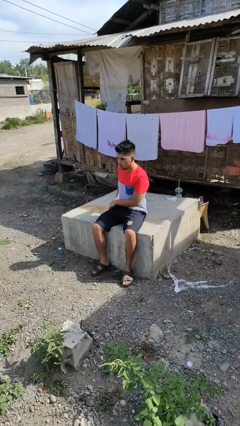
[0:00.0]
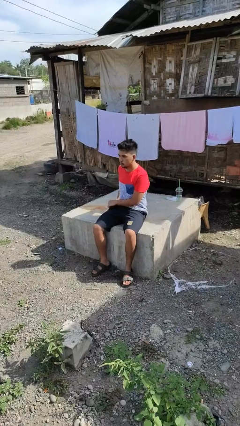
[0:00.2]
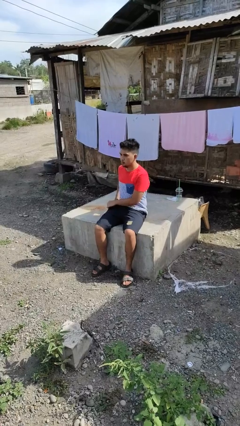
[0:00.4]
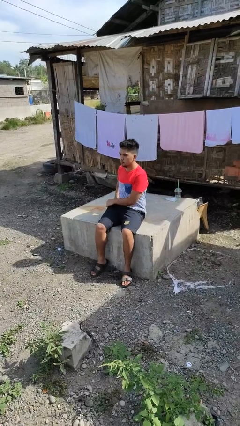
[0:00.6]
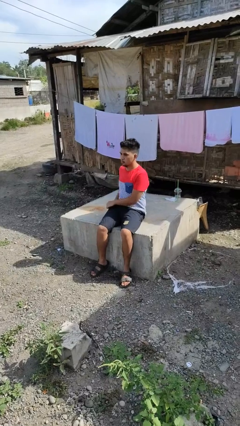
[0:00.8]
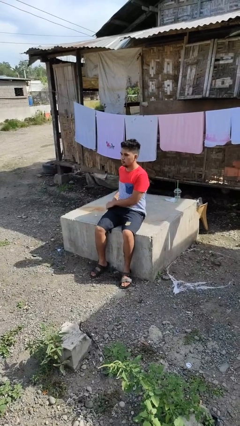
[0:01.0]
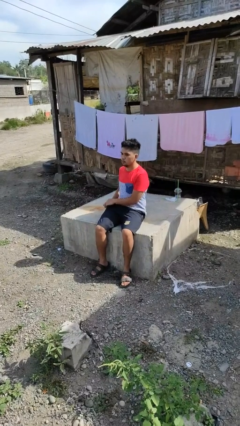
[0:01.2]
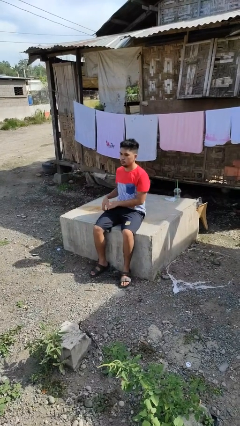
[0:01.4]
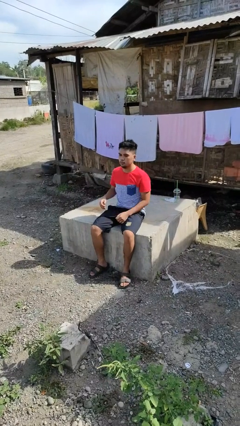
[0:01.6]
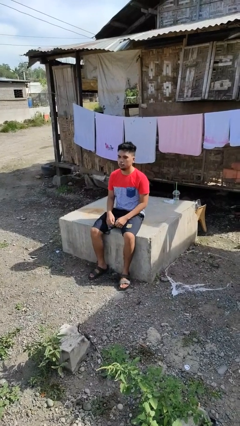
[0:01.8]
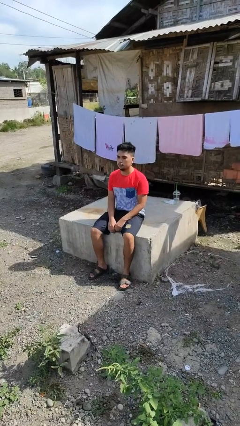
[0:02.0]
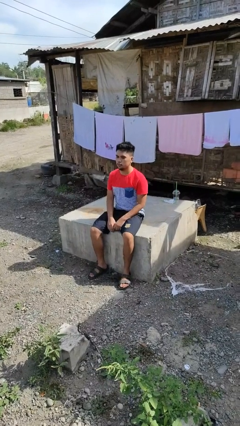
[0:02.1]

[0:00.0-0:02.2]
person puts phone into pocket

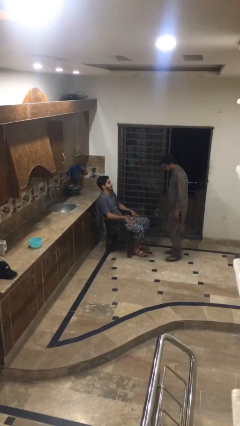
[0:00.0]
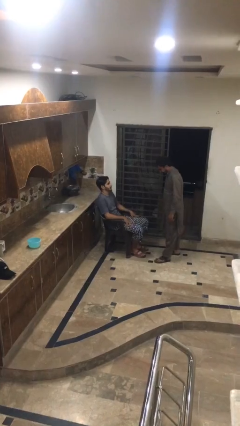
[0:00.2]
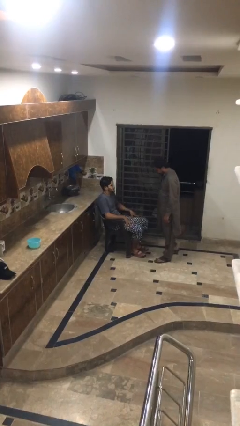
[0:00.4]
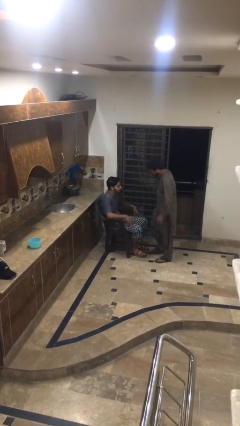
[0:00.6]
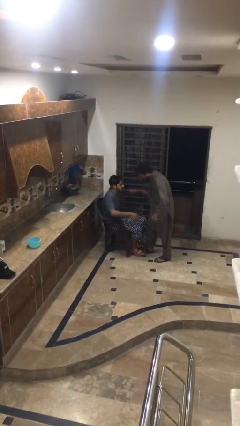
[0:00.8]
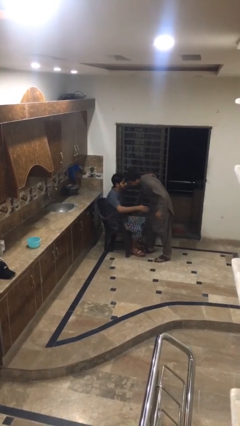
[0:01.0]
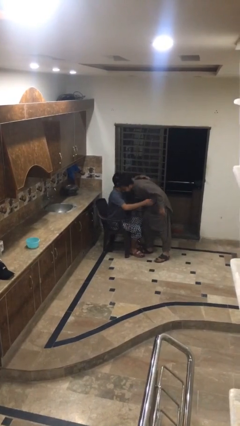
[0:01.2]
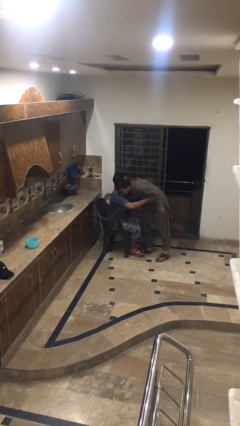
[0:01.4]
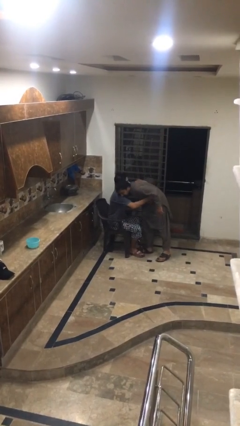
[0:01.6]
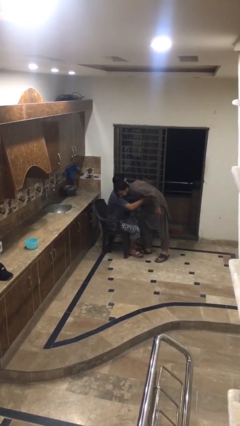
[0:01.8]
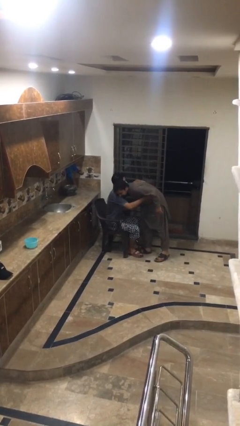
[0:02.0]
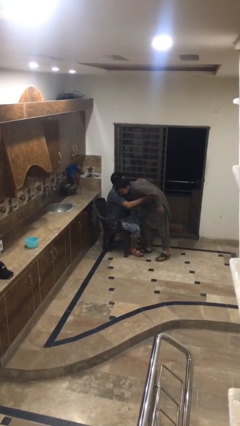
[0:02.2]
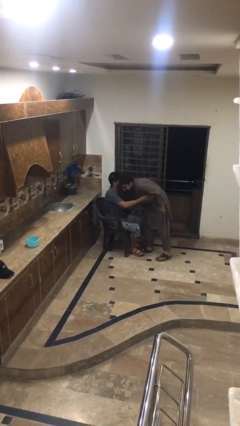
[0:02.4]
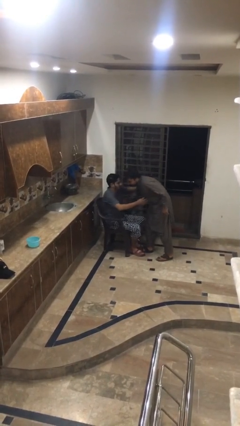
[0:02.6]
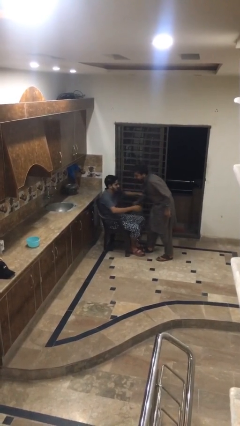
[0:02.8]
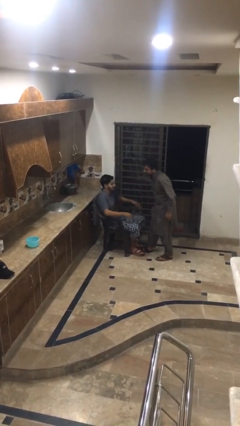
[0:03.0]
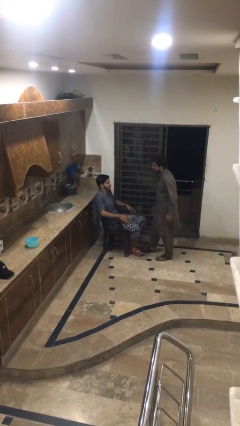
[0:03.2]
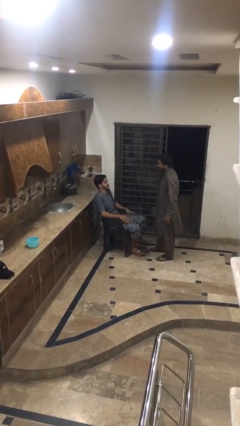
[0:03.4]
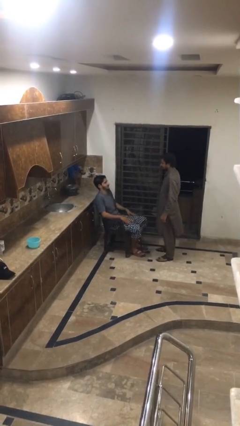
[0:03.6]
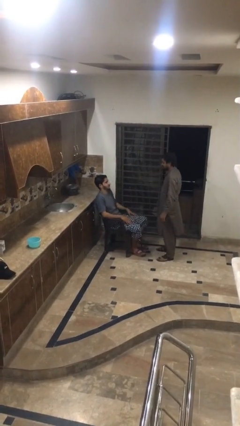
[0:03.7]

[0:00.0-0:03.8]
person embraces person

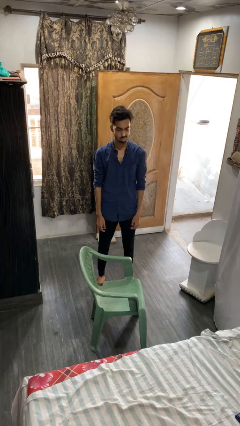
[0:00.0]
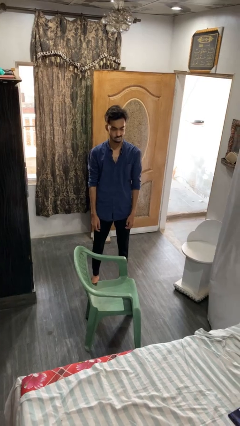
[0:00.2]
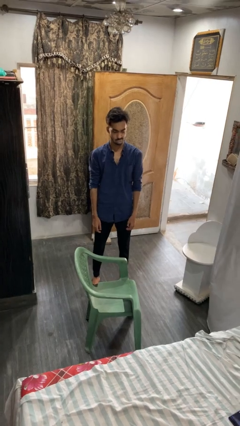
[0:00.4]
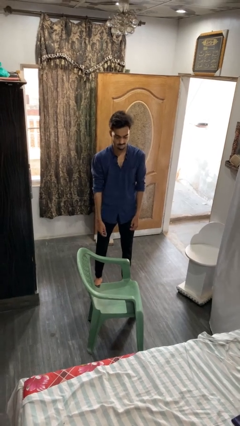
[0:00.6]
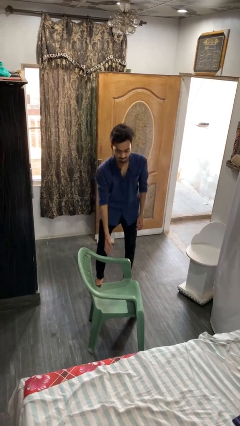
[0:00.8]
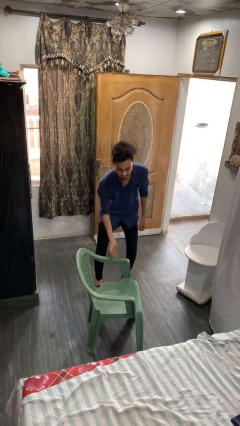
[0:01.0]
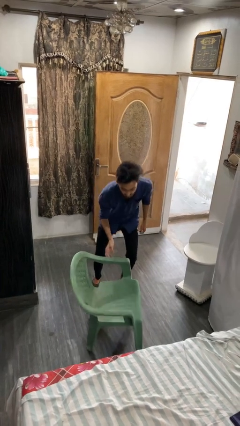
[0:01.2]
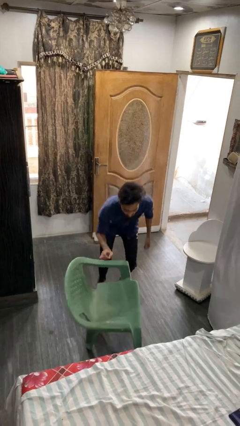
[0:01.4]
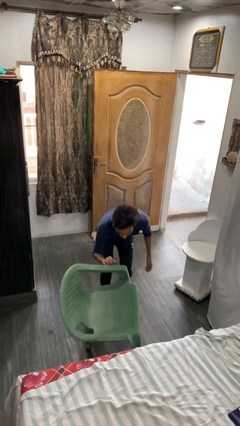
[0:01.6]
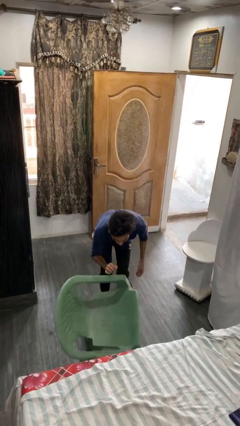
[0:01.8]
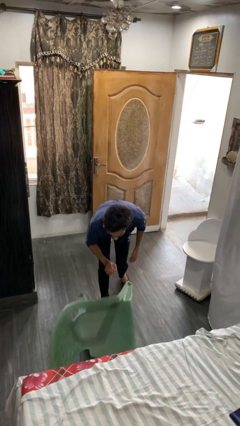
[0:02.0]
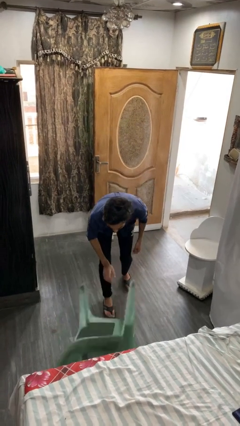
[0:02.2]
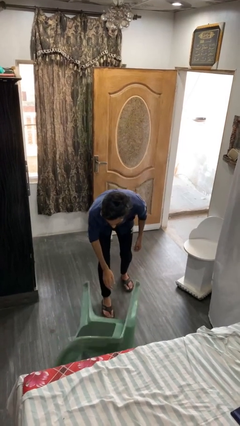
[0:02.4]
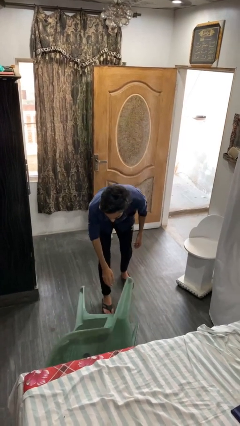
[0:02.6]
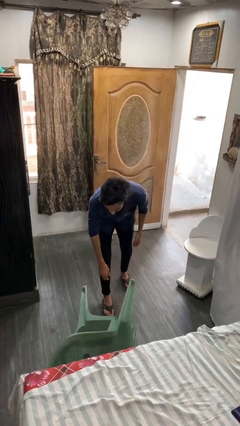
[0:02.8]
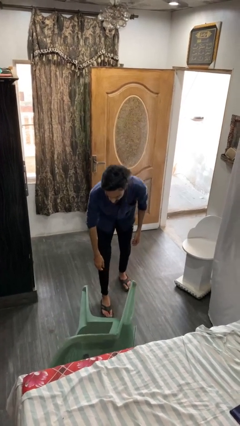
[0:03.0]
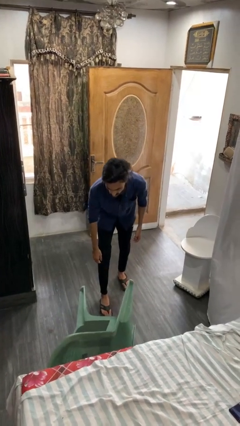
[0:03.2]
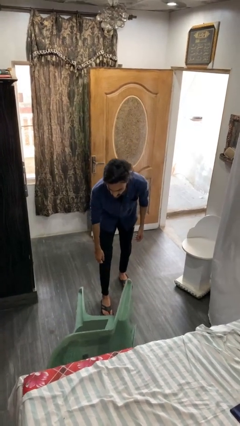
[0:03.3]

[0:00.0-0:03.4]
person knocks over furniture

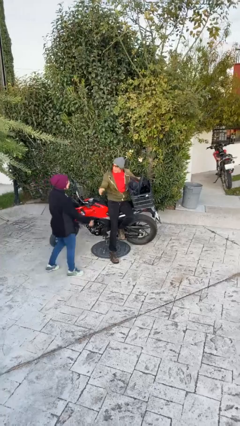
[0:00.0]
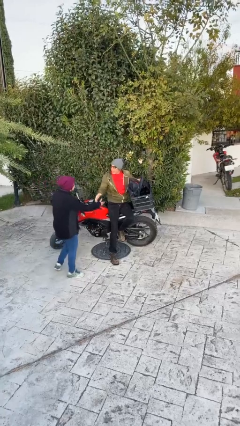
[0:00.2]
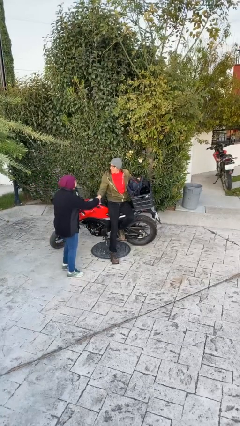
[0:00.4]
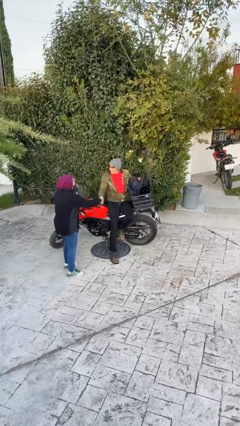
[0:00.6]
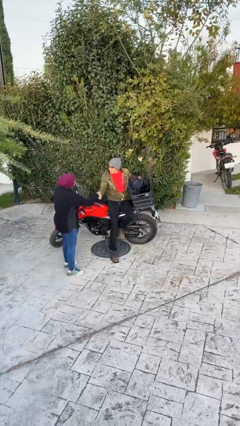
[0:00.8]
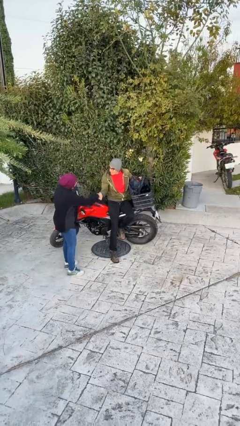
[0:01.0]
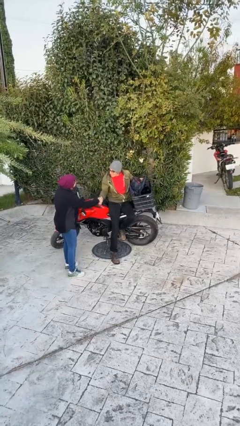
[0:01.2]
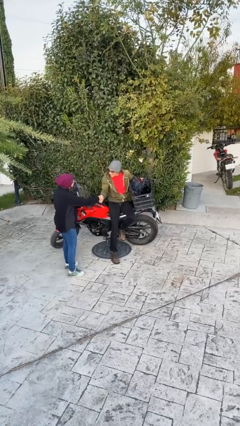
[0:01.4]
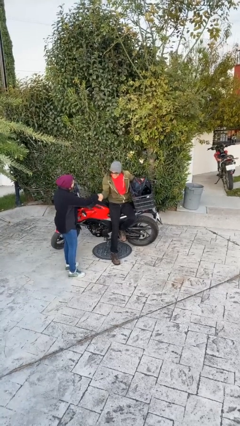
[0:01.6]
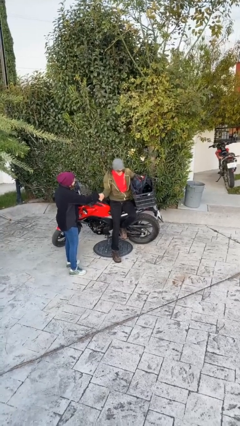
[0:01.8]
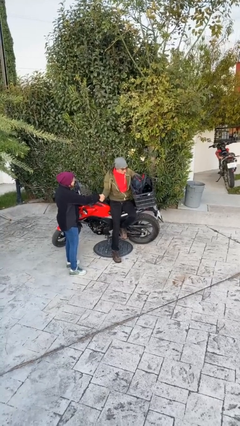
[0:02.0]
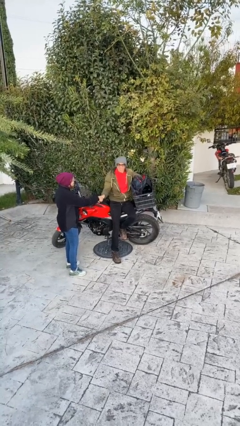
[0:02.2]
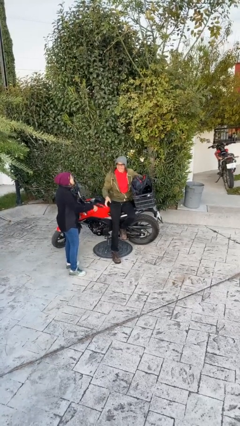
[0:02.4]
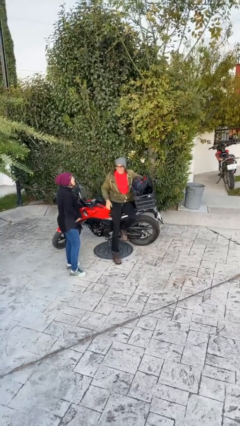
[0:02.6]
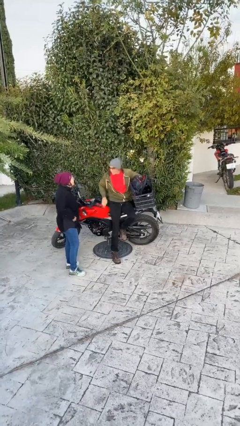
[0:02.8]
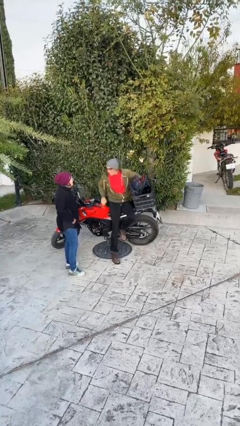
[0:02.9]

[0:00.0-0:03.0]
person shakes hand

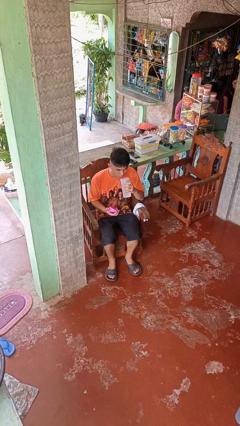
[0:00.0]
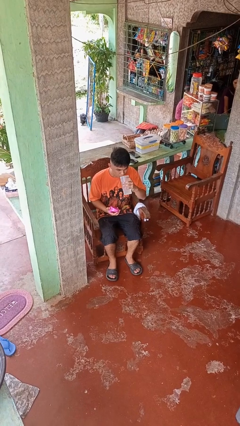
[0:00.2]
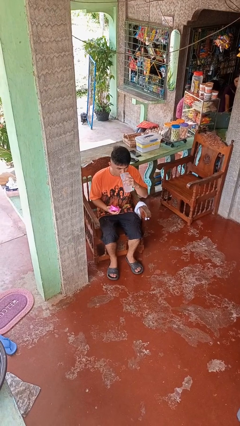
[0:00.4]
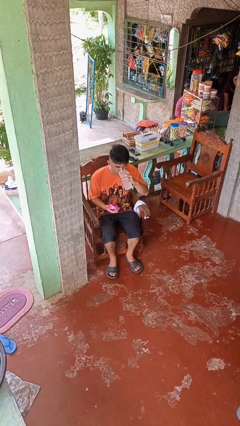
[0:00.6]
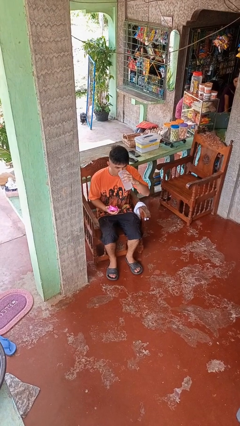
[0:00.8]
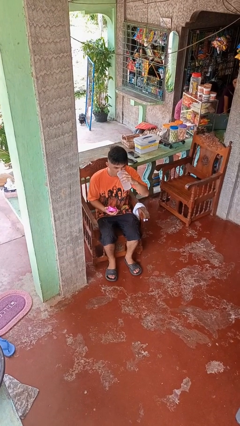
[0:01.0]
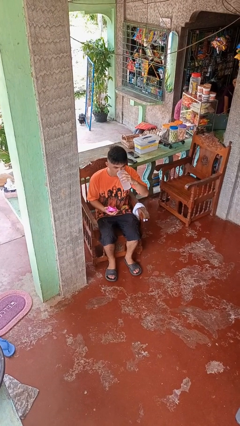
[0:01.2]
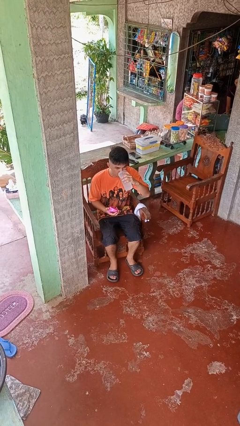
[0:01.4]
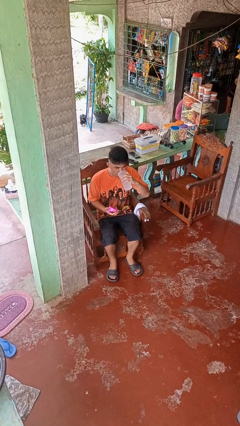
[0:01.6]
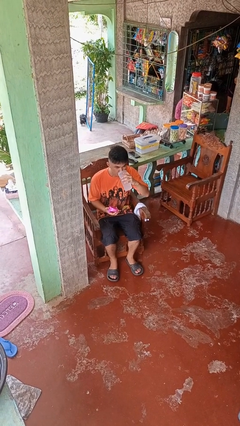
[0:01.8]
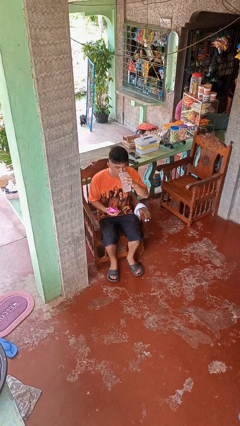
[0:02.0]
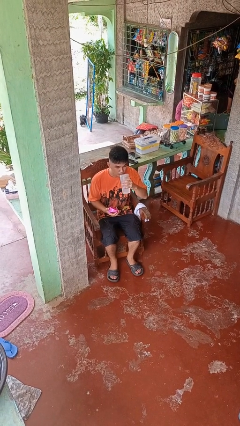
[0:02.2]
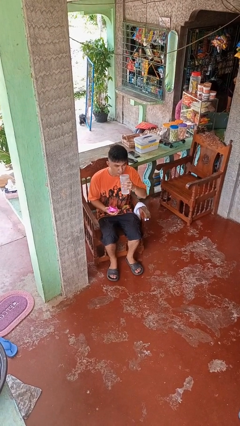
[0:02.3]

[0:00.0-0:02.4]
person drinks from bottle

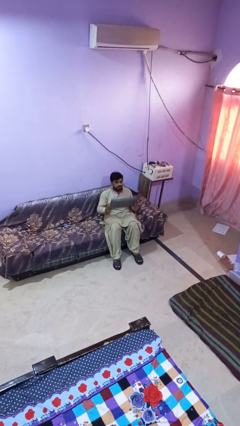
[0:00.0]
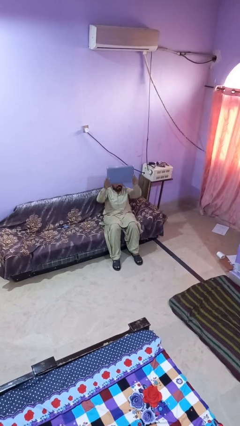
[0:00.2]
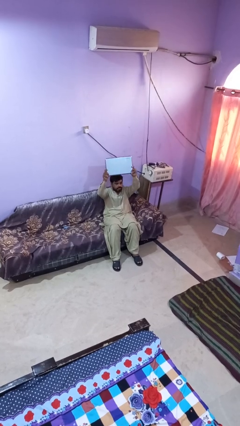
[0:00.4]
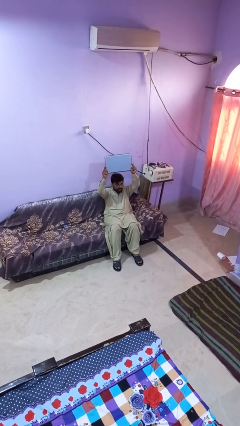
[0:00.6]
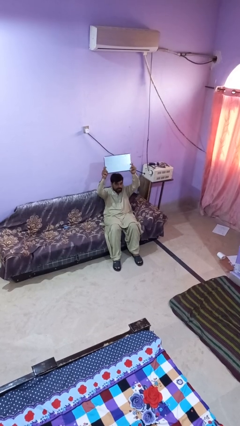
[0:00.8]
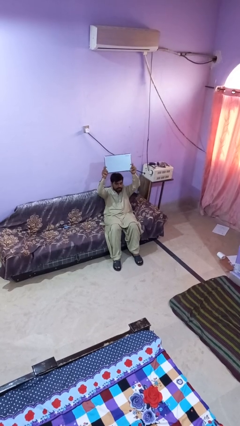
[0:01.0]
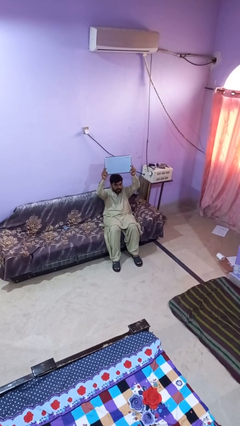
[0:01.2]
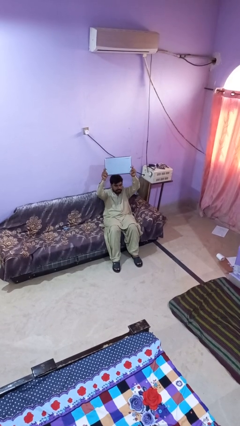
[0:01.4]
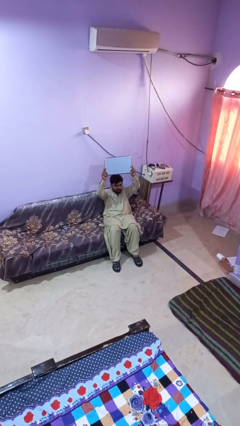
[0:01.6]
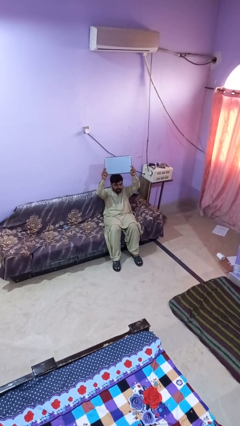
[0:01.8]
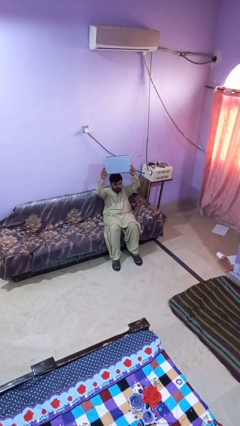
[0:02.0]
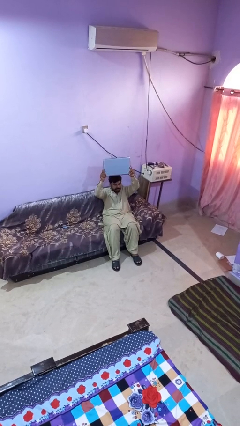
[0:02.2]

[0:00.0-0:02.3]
person holds object above head

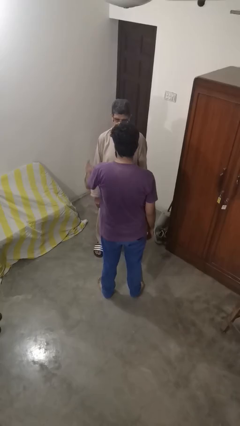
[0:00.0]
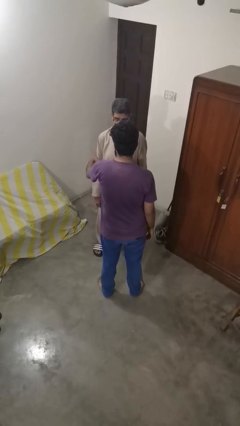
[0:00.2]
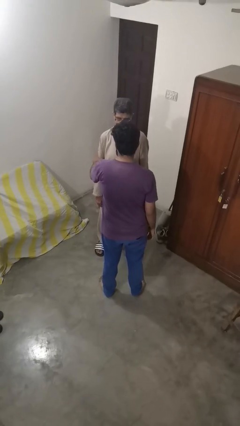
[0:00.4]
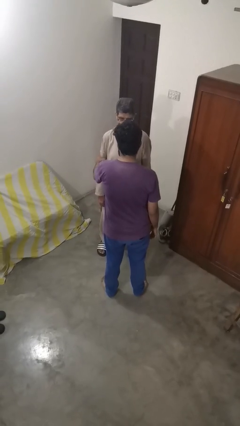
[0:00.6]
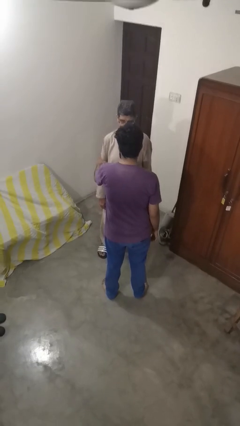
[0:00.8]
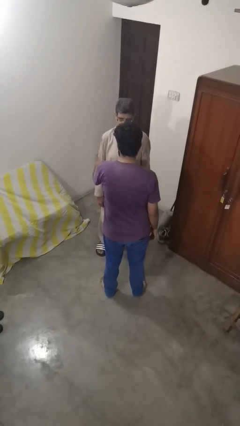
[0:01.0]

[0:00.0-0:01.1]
person grabs person by bicep
